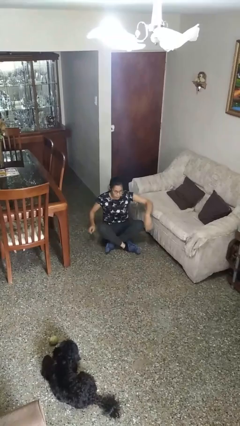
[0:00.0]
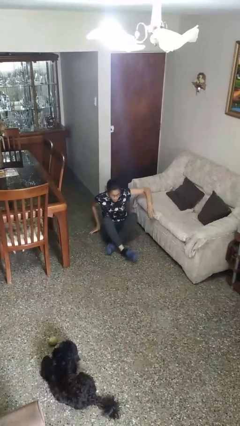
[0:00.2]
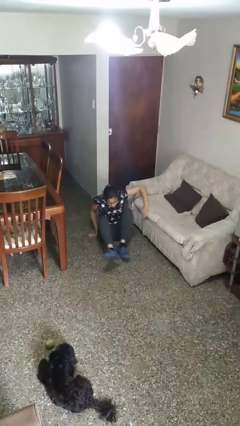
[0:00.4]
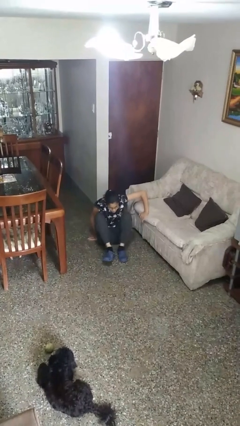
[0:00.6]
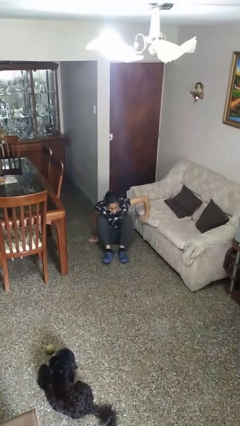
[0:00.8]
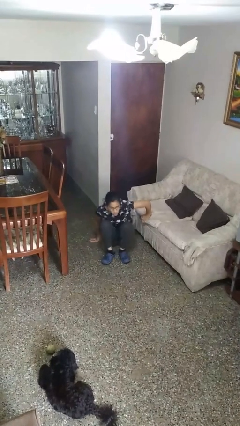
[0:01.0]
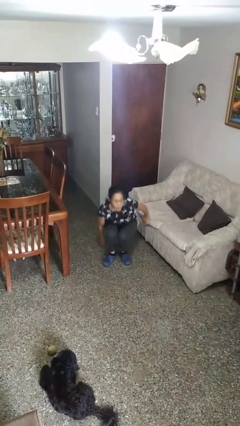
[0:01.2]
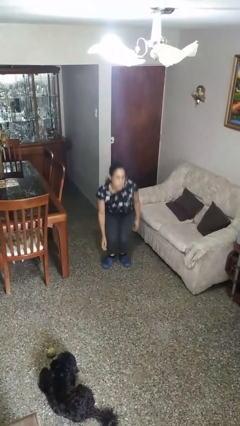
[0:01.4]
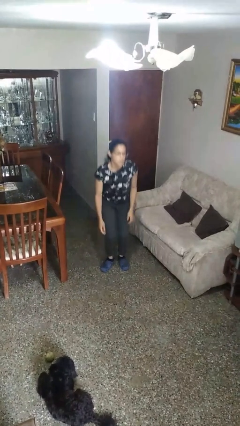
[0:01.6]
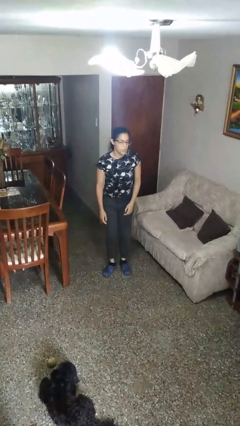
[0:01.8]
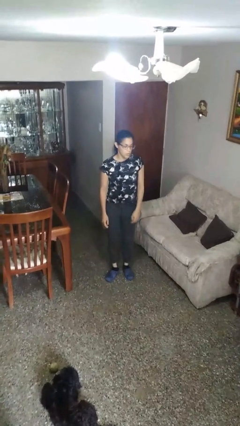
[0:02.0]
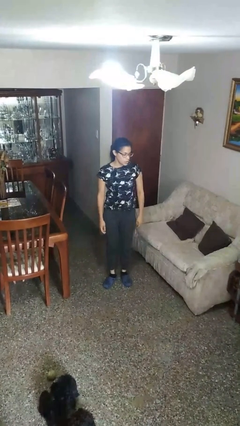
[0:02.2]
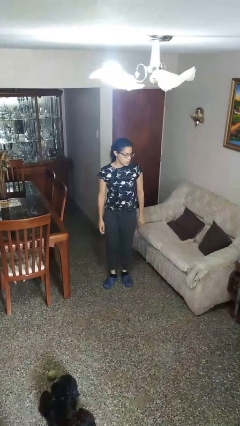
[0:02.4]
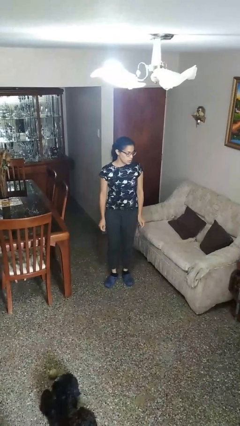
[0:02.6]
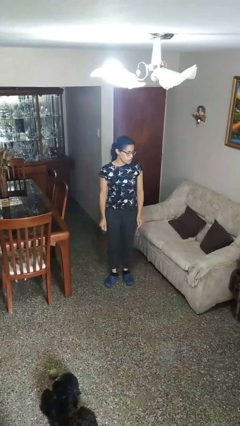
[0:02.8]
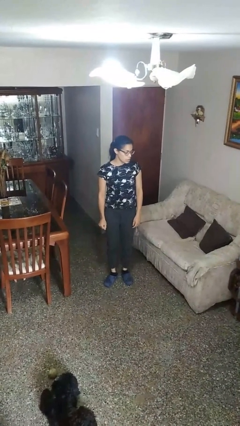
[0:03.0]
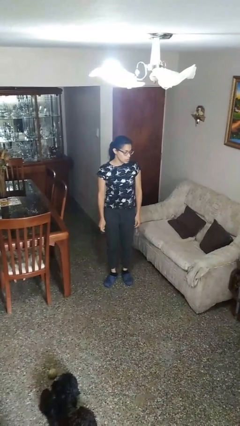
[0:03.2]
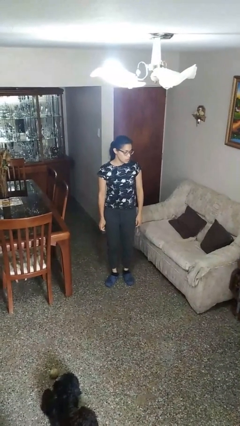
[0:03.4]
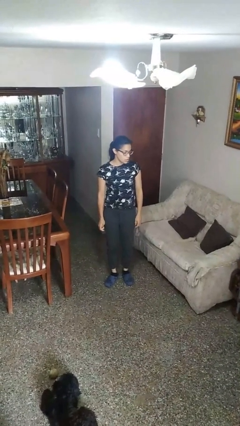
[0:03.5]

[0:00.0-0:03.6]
person stands up from floor

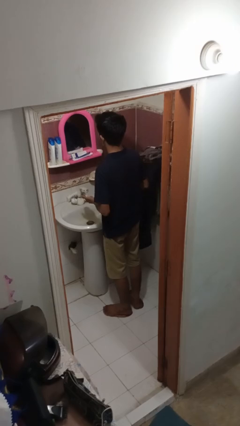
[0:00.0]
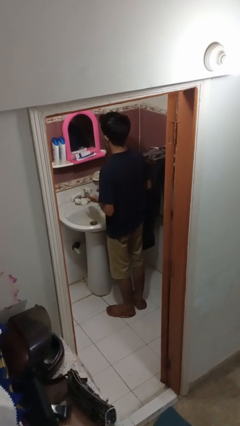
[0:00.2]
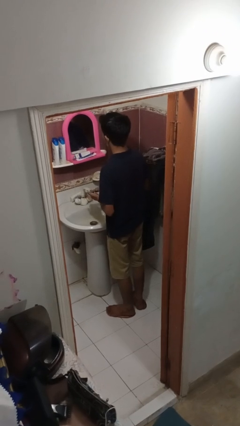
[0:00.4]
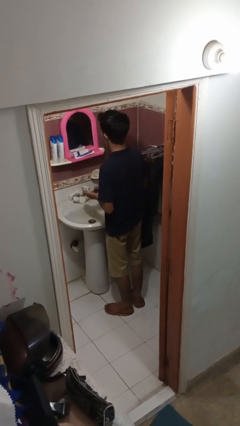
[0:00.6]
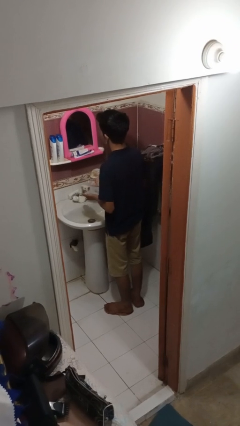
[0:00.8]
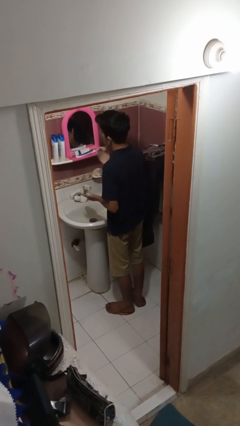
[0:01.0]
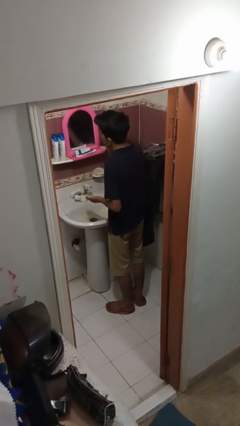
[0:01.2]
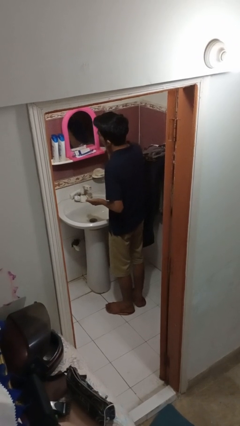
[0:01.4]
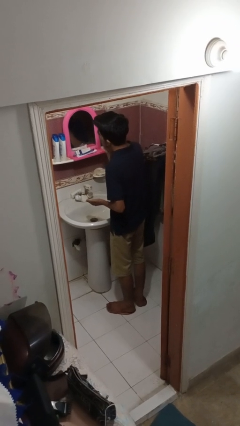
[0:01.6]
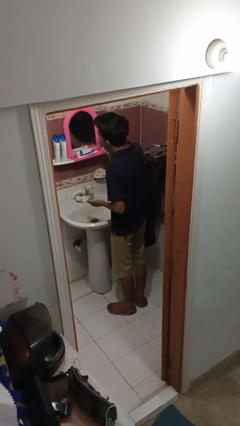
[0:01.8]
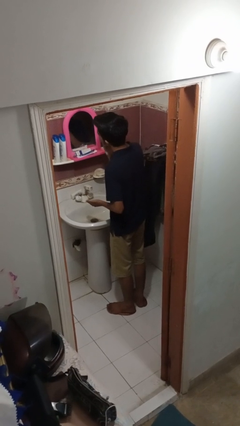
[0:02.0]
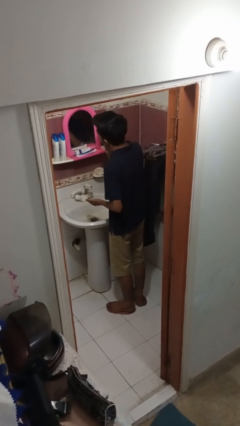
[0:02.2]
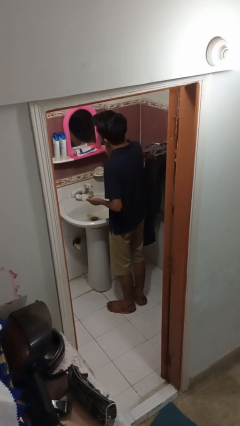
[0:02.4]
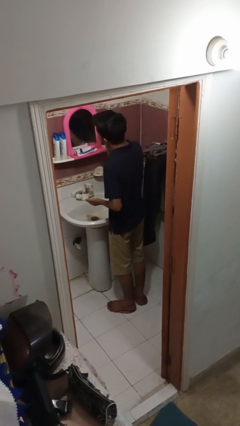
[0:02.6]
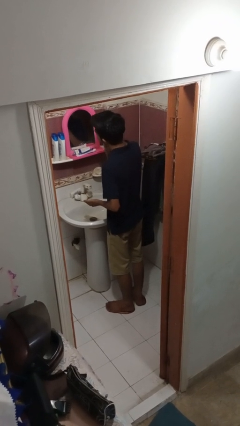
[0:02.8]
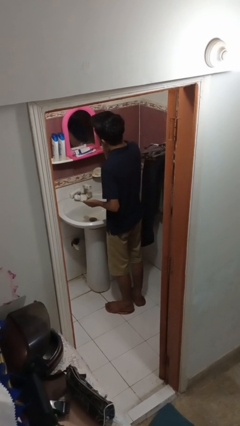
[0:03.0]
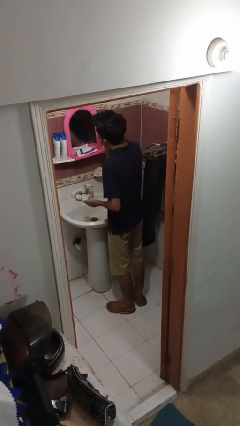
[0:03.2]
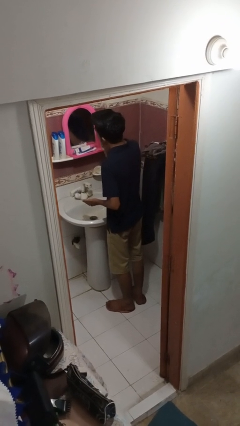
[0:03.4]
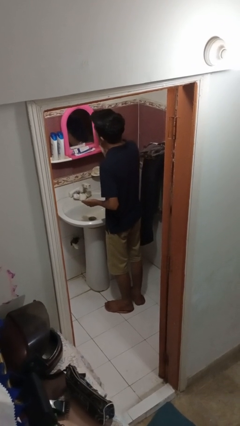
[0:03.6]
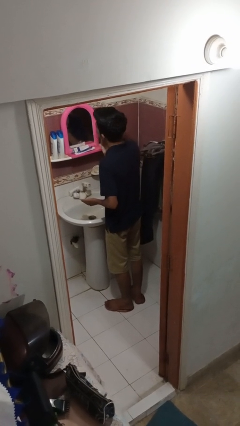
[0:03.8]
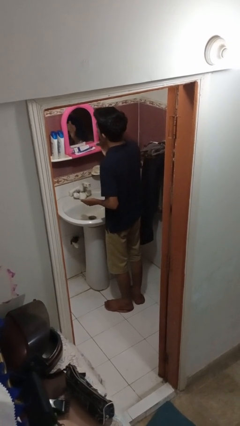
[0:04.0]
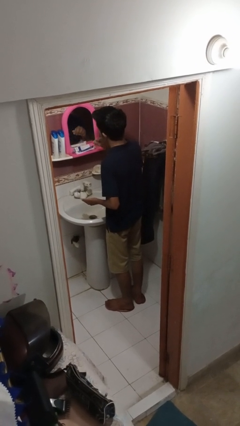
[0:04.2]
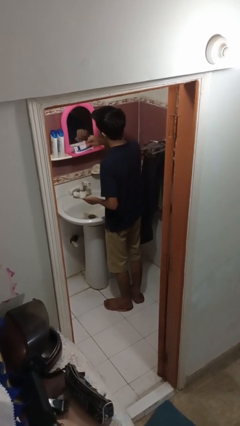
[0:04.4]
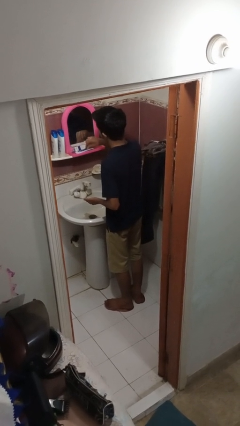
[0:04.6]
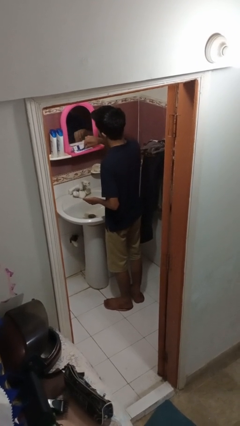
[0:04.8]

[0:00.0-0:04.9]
person applies shaving cream

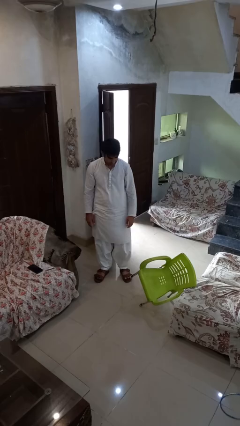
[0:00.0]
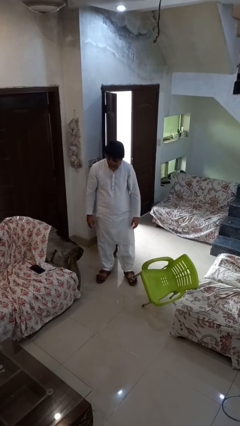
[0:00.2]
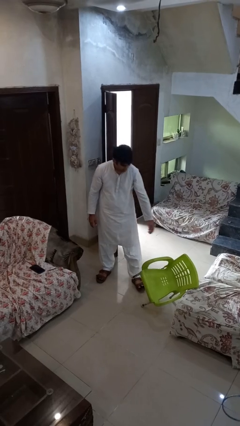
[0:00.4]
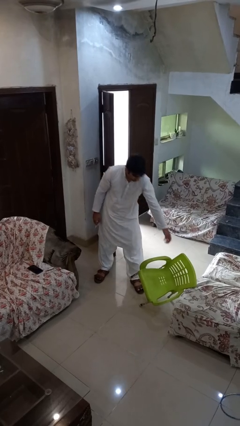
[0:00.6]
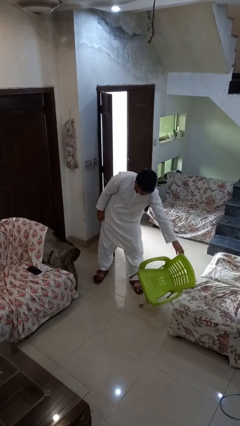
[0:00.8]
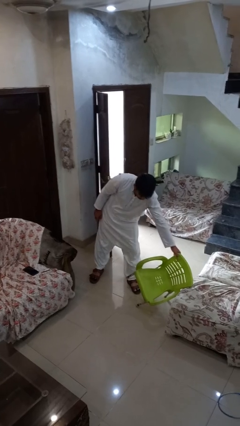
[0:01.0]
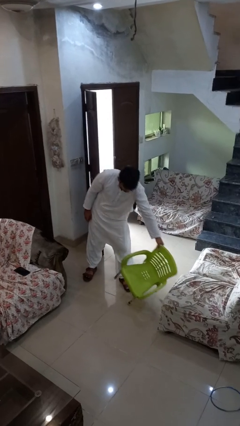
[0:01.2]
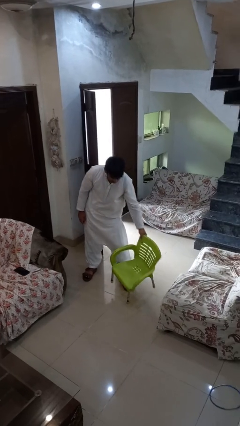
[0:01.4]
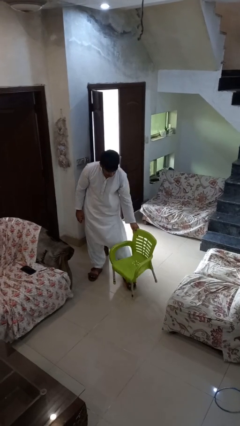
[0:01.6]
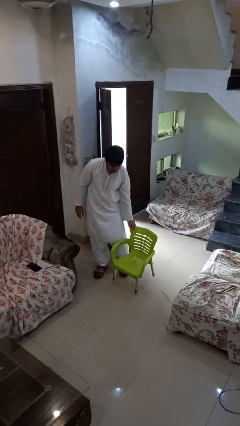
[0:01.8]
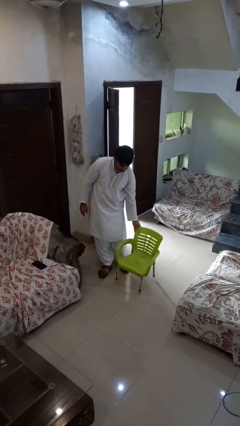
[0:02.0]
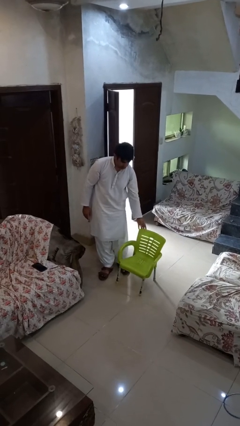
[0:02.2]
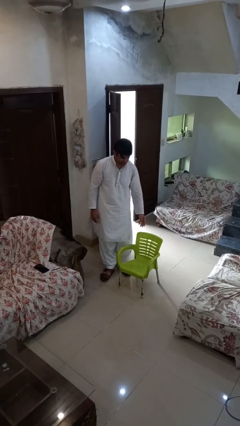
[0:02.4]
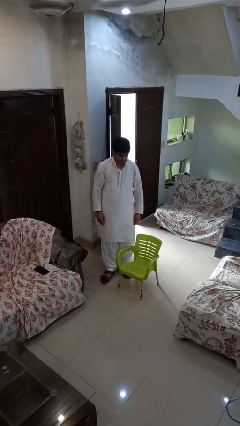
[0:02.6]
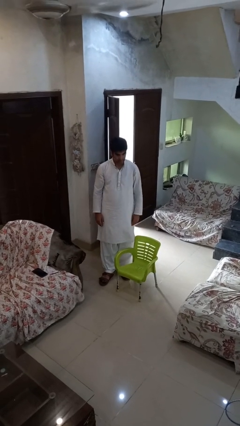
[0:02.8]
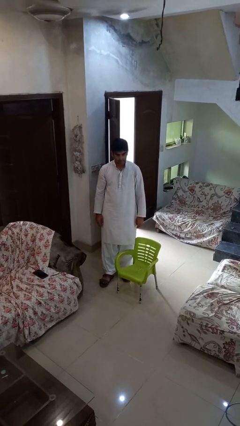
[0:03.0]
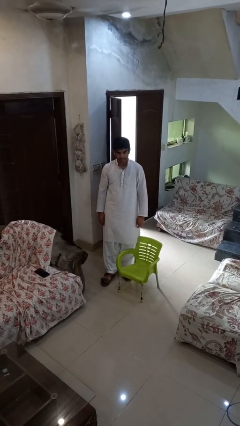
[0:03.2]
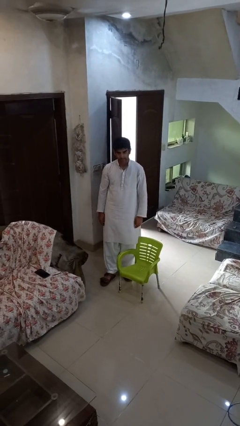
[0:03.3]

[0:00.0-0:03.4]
person sets upright furniture

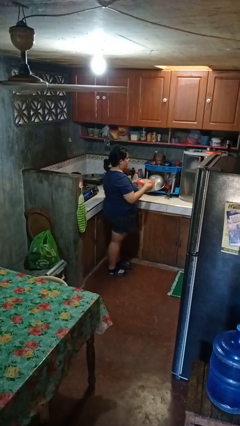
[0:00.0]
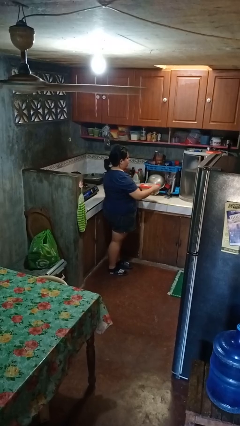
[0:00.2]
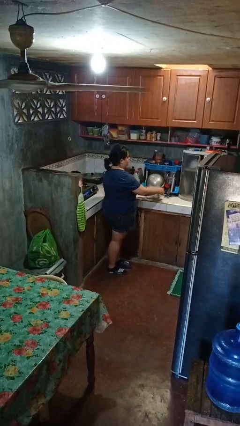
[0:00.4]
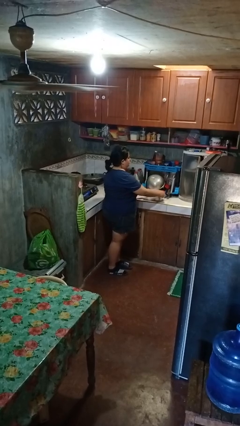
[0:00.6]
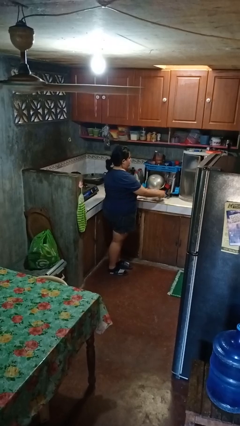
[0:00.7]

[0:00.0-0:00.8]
person puts down object on countertop

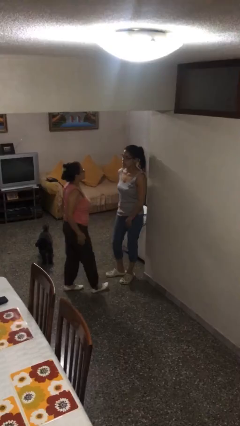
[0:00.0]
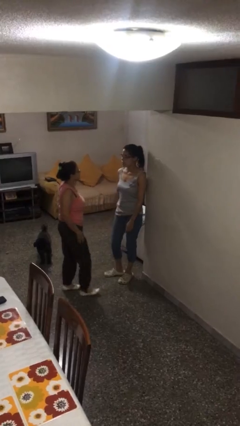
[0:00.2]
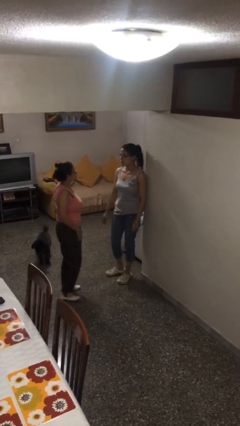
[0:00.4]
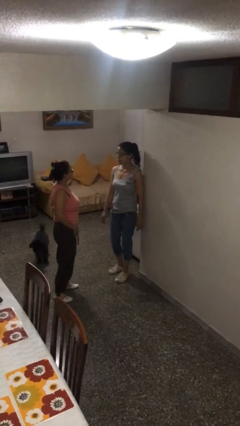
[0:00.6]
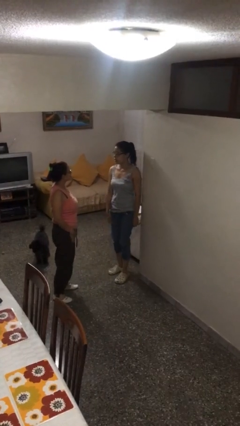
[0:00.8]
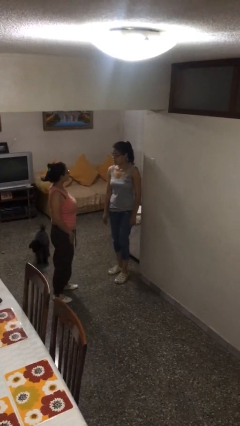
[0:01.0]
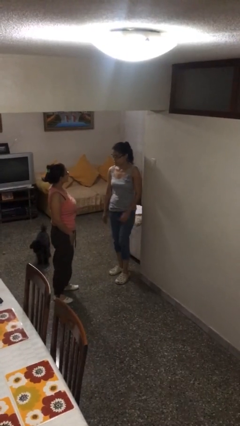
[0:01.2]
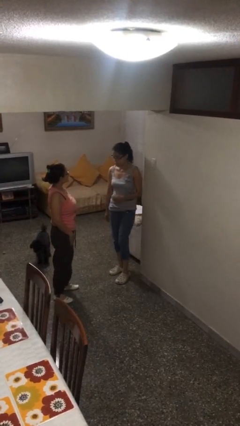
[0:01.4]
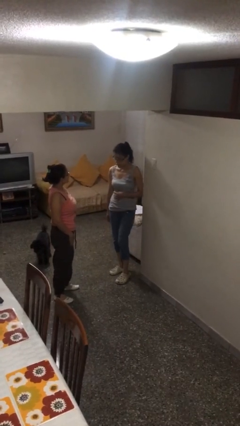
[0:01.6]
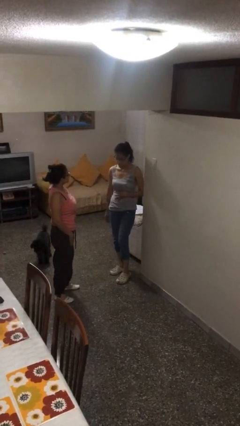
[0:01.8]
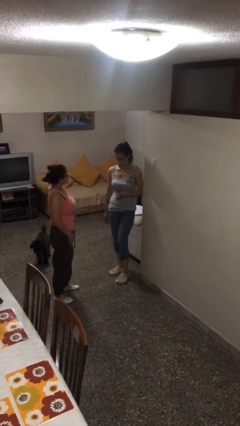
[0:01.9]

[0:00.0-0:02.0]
person talks to person

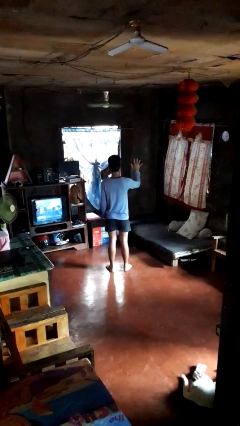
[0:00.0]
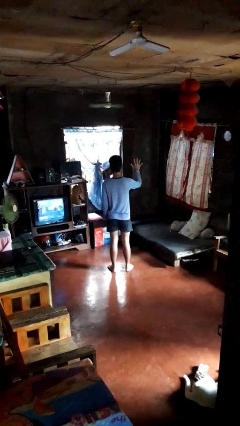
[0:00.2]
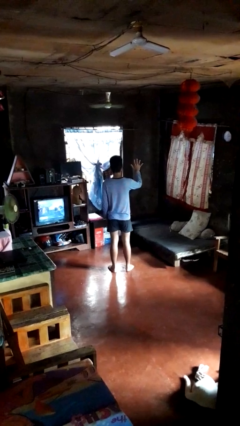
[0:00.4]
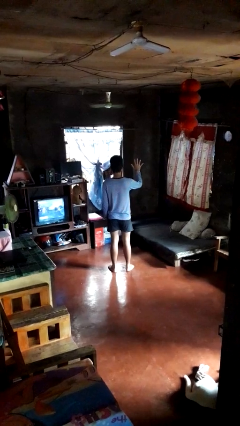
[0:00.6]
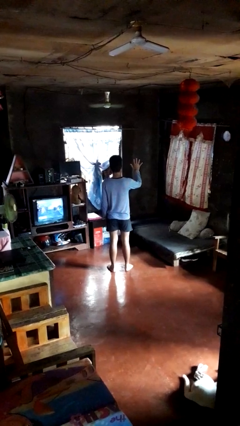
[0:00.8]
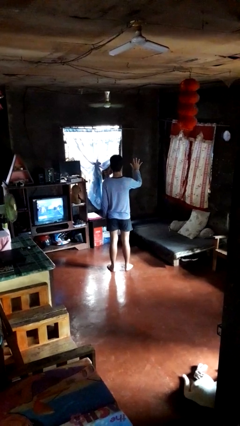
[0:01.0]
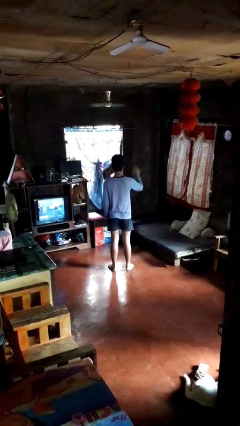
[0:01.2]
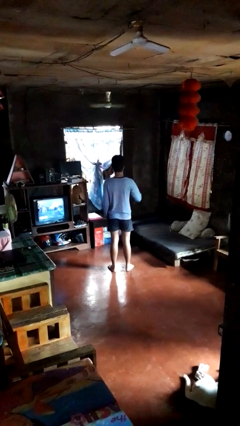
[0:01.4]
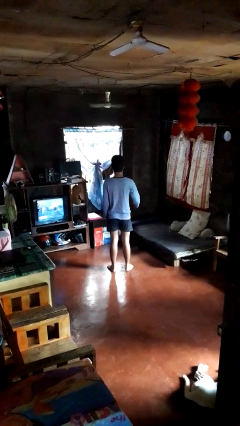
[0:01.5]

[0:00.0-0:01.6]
person gestures number five

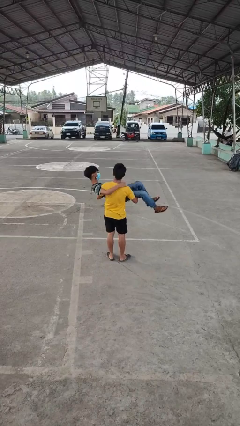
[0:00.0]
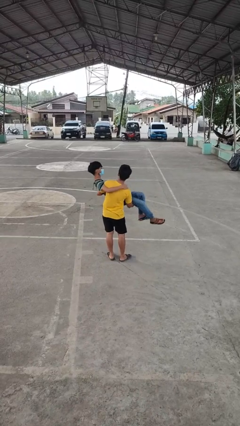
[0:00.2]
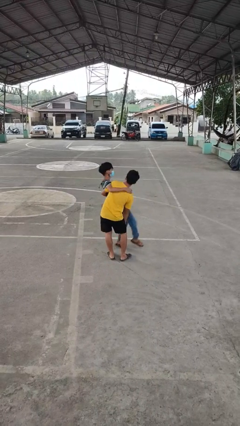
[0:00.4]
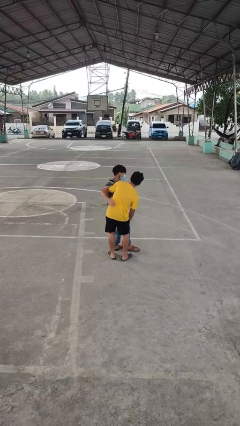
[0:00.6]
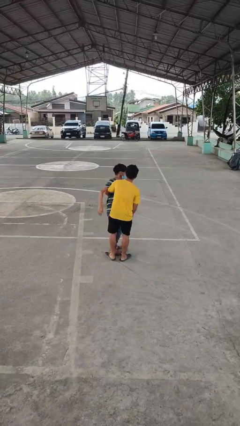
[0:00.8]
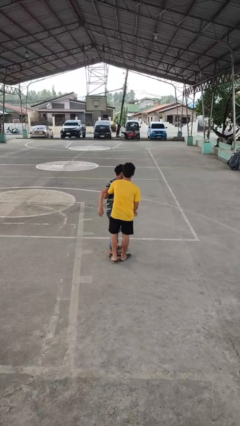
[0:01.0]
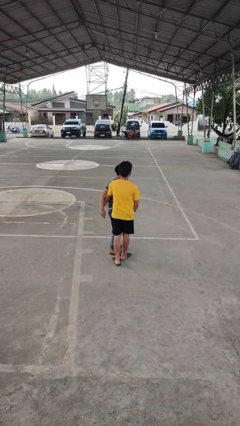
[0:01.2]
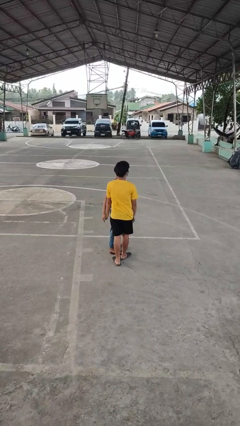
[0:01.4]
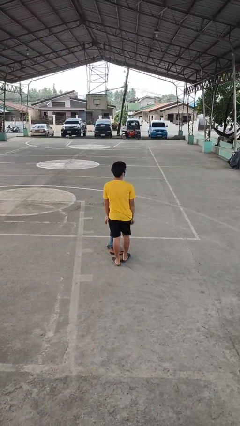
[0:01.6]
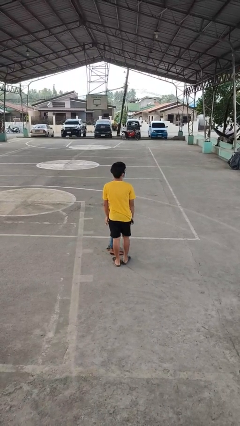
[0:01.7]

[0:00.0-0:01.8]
person puts down person
